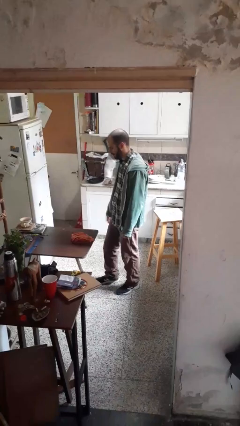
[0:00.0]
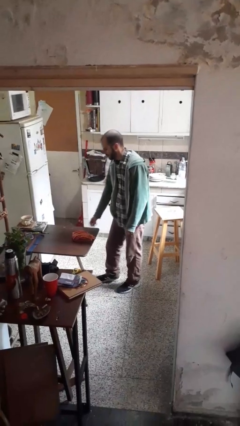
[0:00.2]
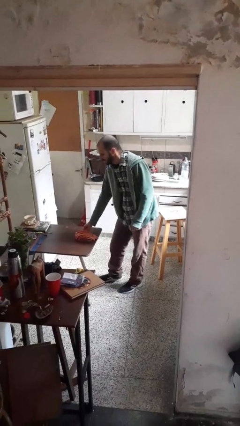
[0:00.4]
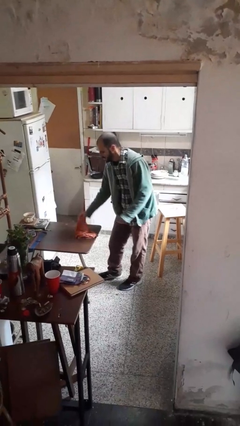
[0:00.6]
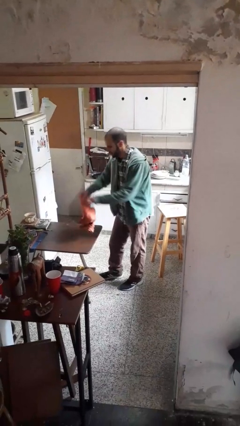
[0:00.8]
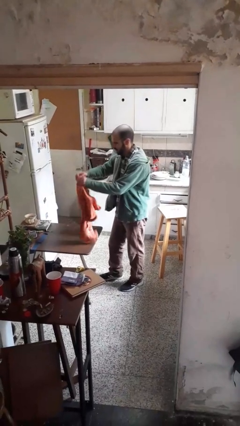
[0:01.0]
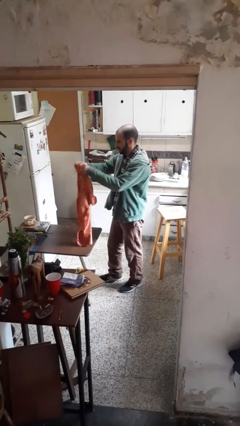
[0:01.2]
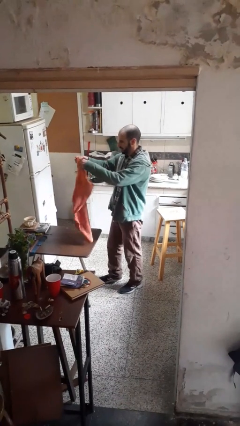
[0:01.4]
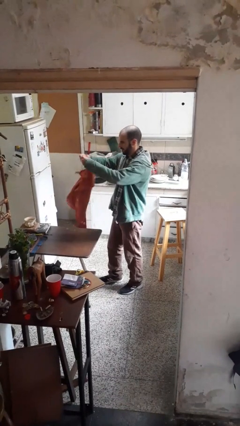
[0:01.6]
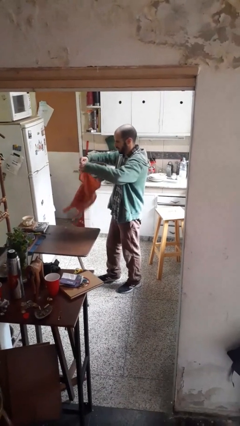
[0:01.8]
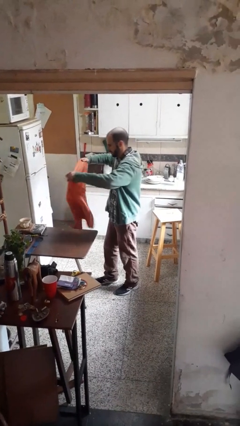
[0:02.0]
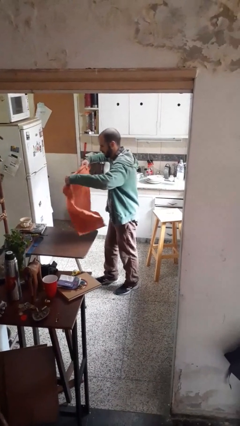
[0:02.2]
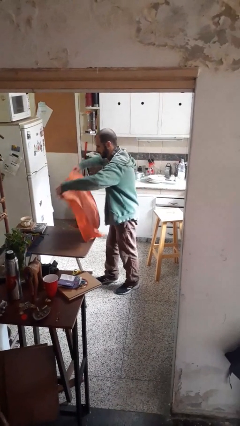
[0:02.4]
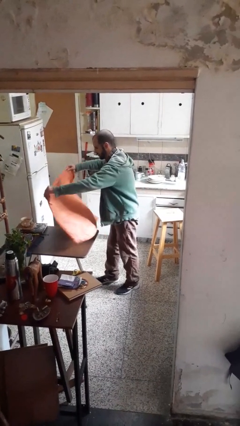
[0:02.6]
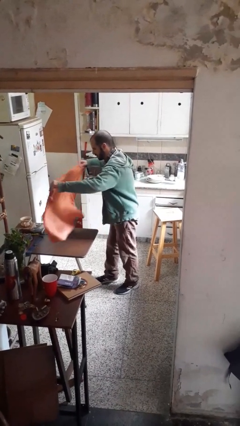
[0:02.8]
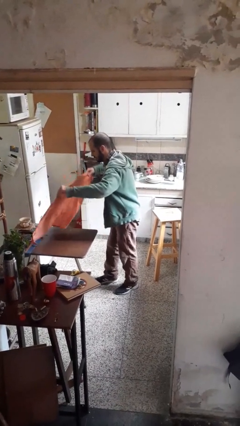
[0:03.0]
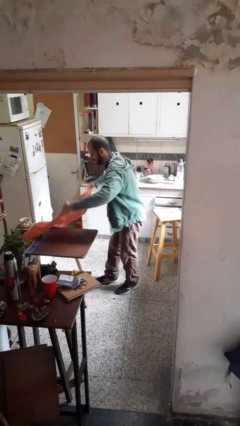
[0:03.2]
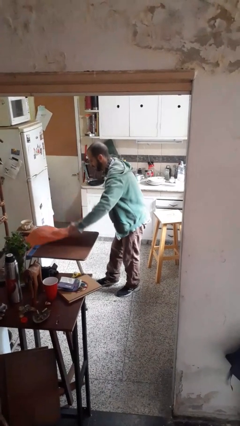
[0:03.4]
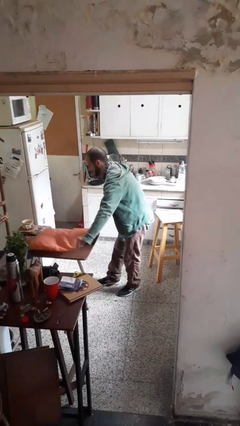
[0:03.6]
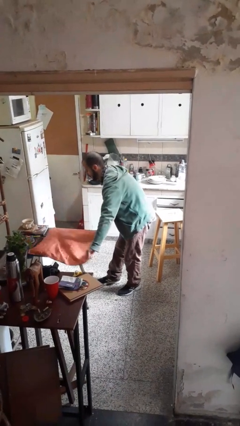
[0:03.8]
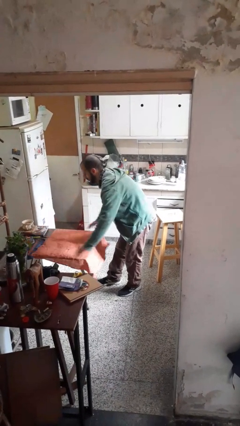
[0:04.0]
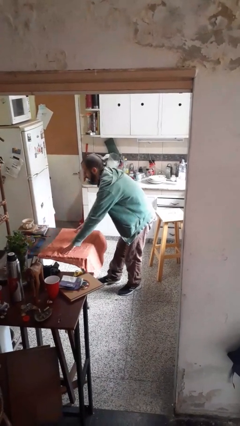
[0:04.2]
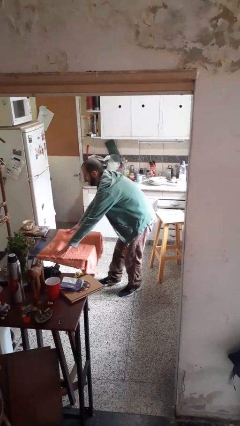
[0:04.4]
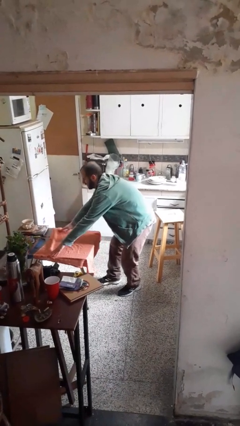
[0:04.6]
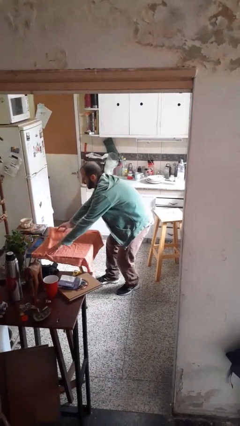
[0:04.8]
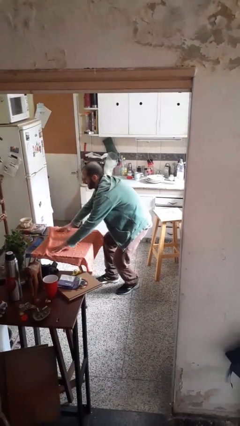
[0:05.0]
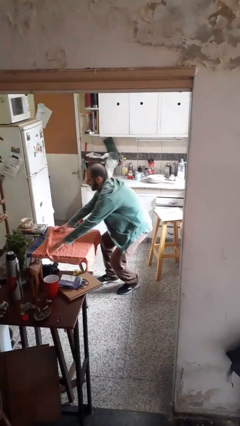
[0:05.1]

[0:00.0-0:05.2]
person spreads tablecloth

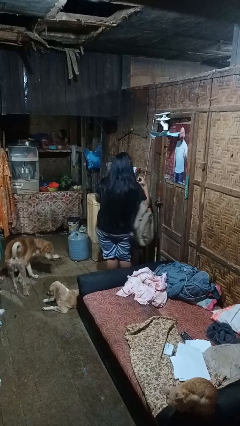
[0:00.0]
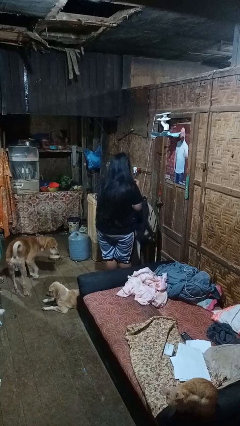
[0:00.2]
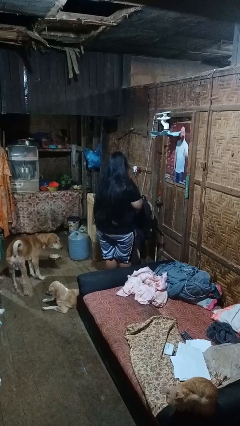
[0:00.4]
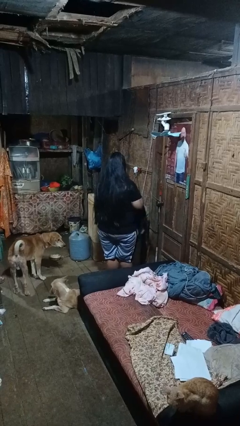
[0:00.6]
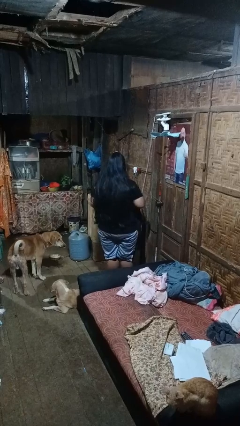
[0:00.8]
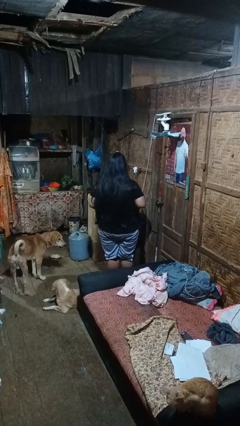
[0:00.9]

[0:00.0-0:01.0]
person takes off backpack

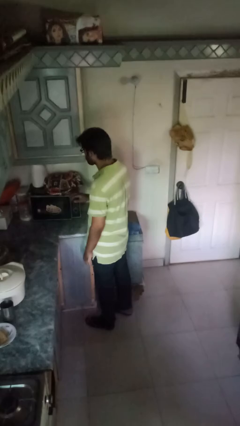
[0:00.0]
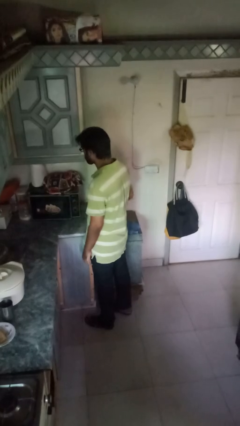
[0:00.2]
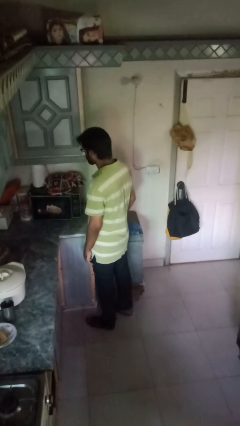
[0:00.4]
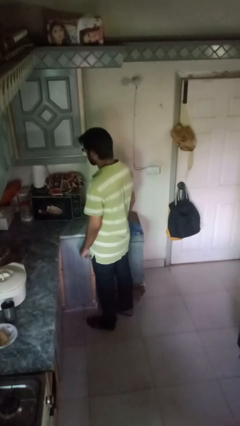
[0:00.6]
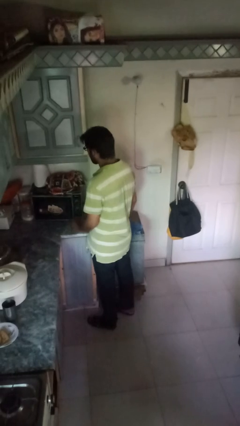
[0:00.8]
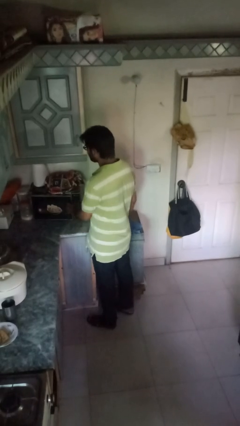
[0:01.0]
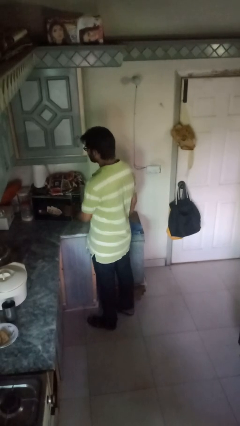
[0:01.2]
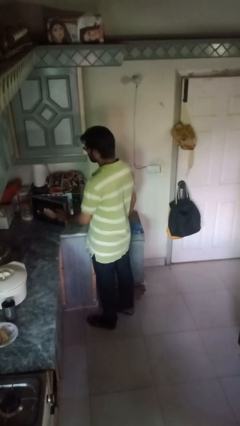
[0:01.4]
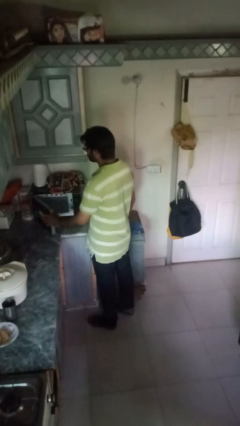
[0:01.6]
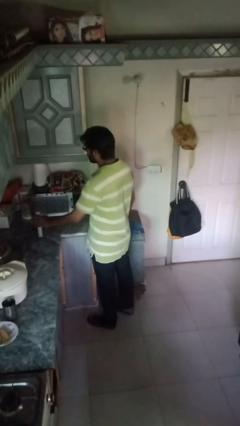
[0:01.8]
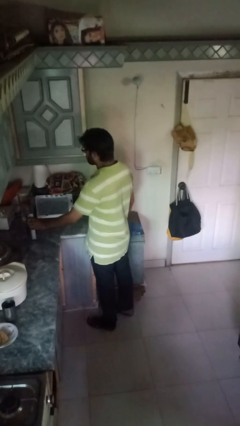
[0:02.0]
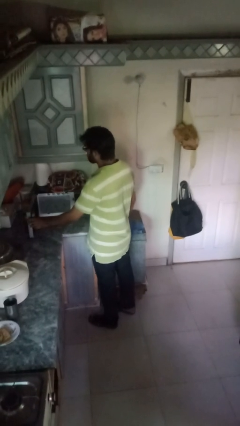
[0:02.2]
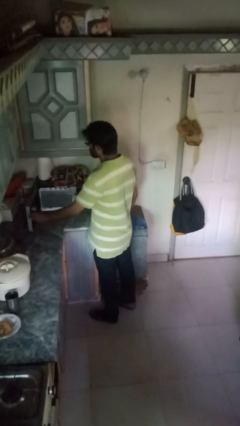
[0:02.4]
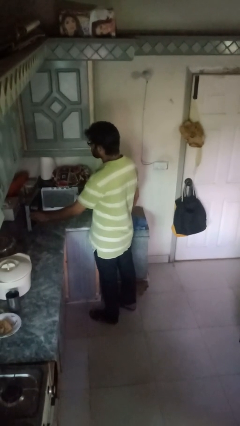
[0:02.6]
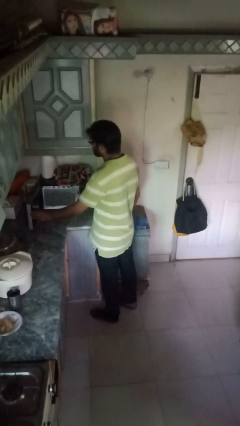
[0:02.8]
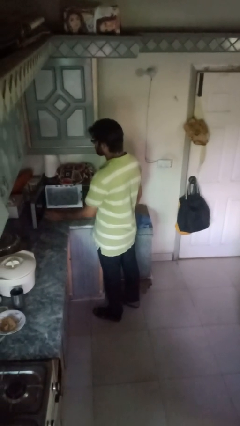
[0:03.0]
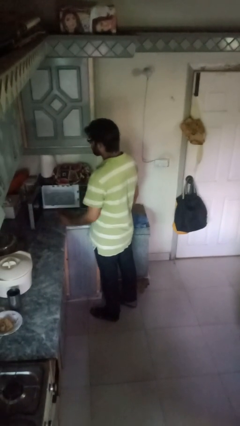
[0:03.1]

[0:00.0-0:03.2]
person opens oven door

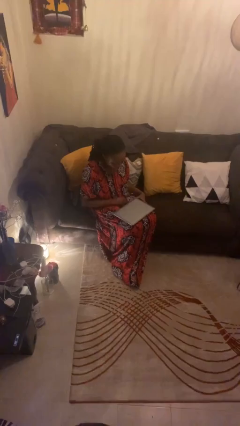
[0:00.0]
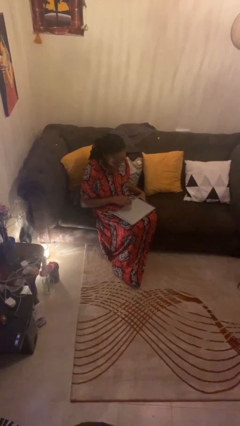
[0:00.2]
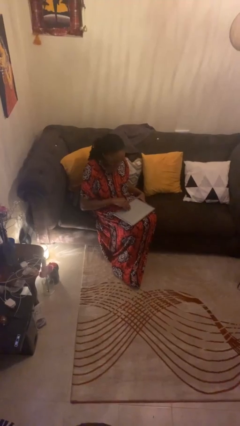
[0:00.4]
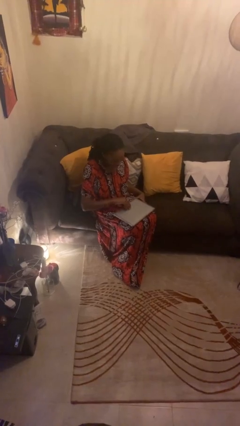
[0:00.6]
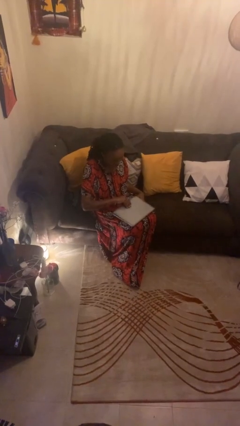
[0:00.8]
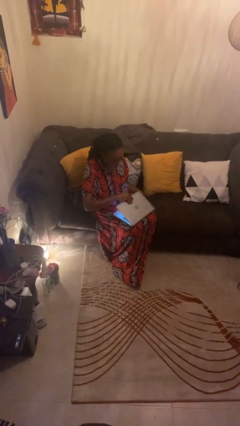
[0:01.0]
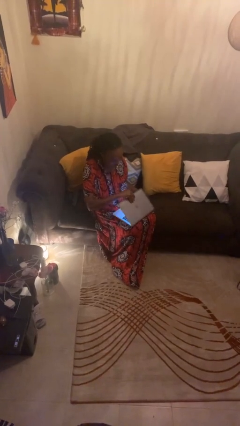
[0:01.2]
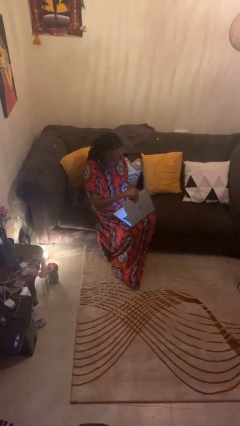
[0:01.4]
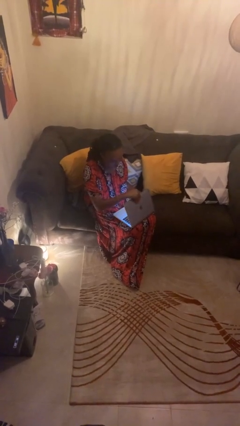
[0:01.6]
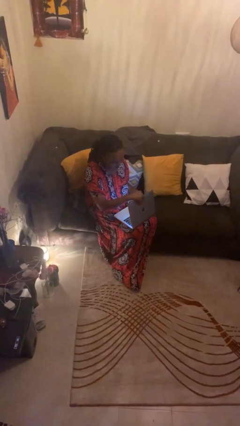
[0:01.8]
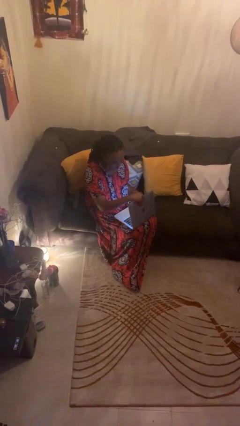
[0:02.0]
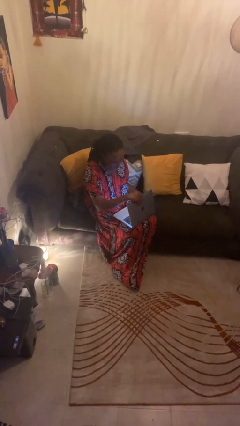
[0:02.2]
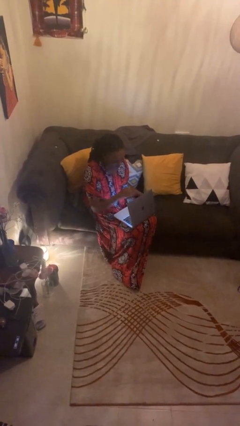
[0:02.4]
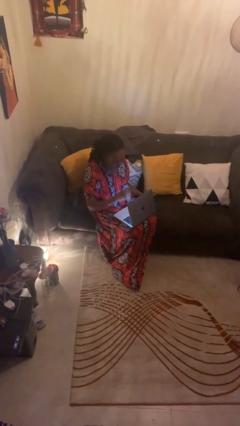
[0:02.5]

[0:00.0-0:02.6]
person opens laptop

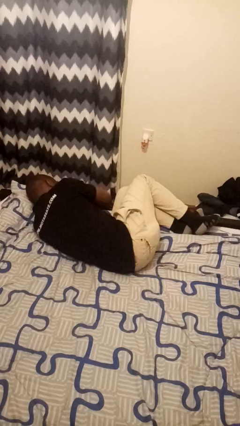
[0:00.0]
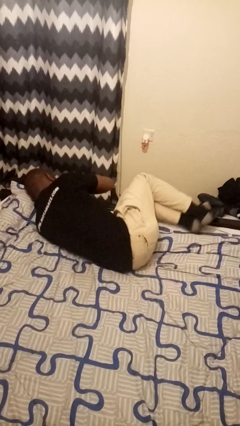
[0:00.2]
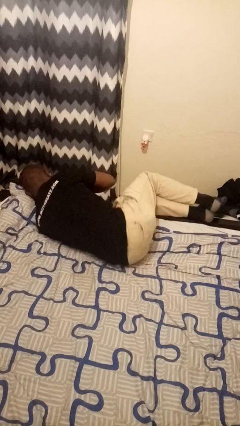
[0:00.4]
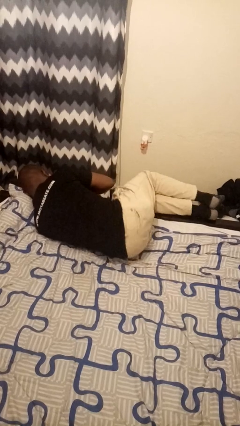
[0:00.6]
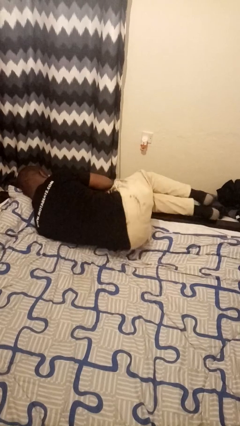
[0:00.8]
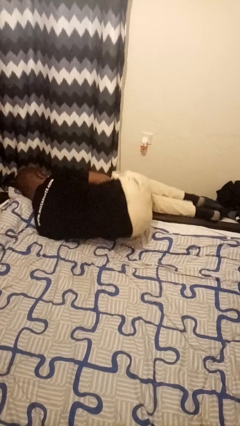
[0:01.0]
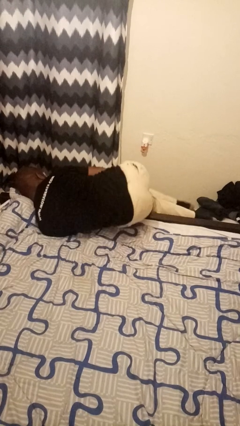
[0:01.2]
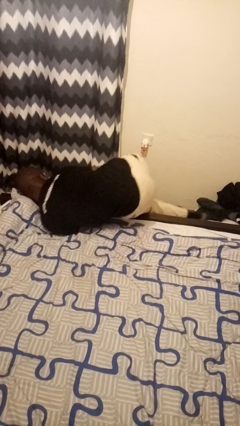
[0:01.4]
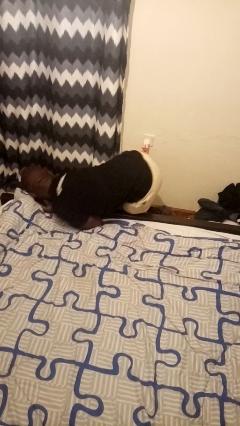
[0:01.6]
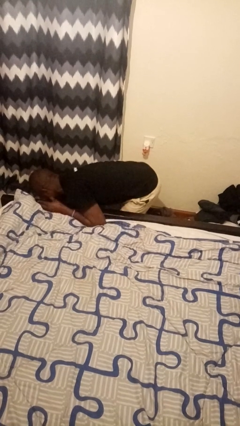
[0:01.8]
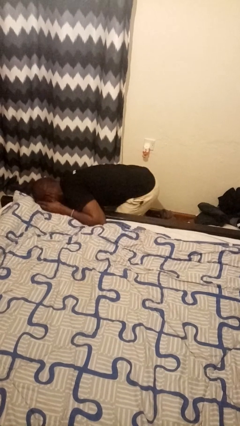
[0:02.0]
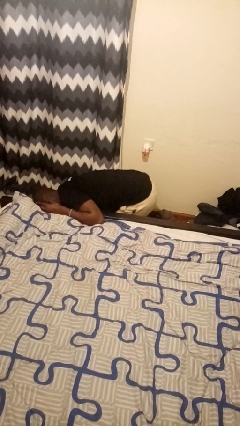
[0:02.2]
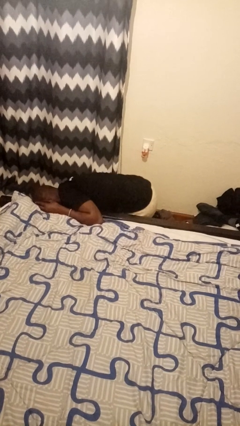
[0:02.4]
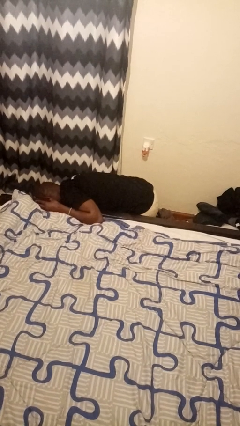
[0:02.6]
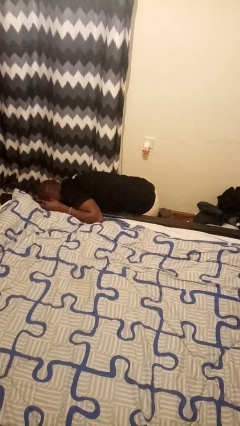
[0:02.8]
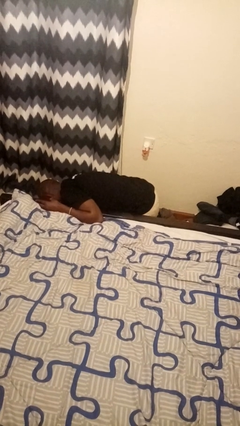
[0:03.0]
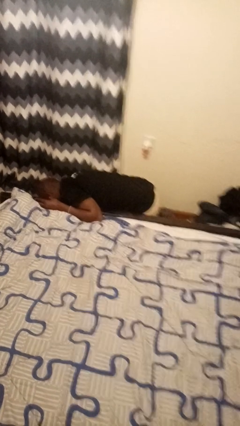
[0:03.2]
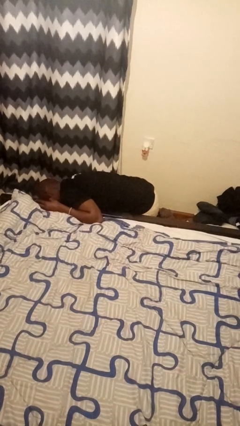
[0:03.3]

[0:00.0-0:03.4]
person falls from bed

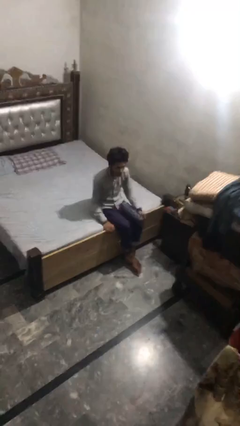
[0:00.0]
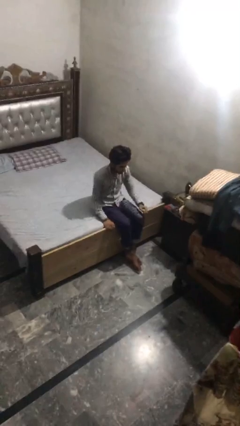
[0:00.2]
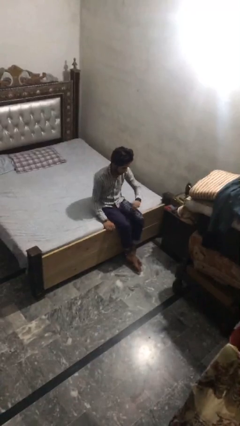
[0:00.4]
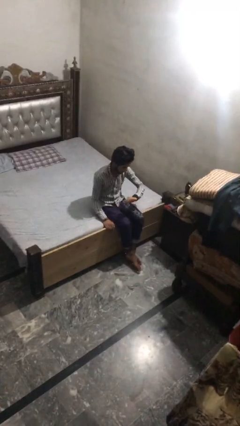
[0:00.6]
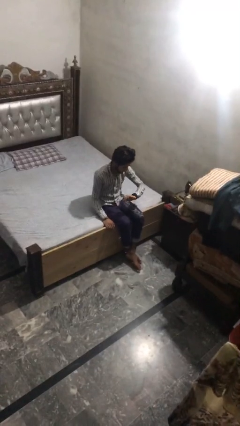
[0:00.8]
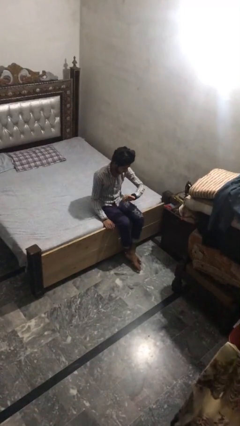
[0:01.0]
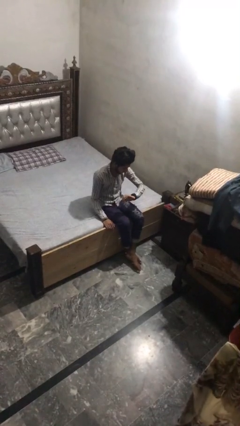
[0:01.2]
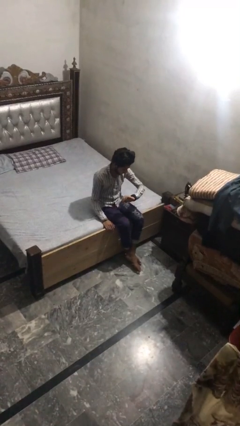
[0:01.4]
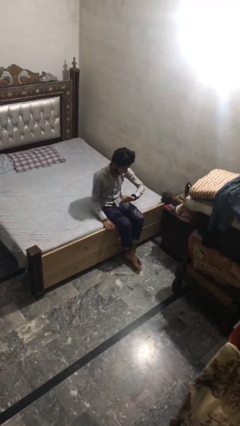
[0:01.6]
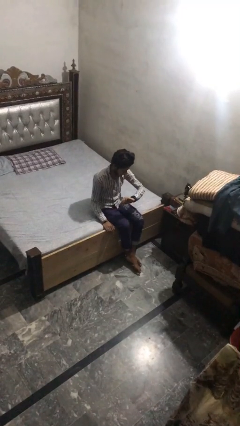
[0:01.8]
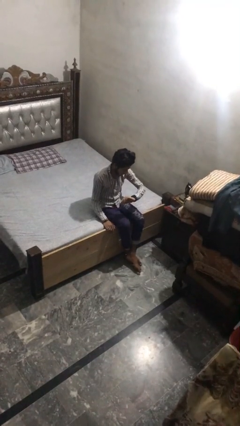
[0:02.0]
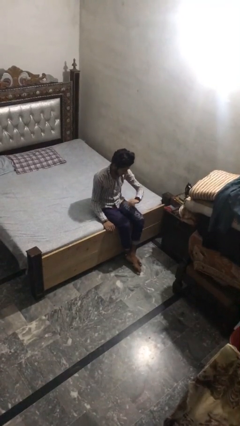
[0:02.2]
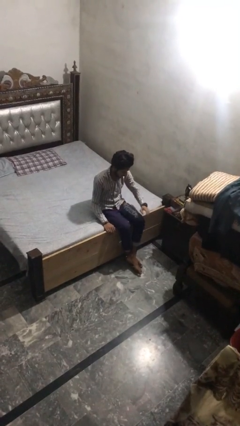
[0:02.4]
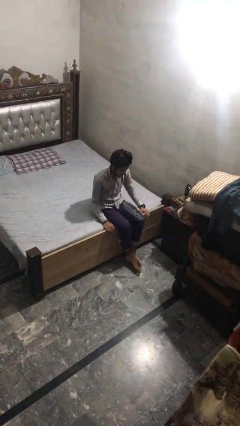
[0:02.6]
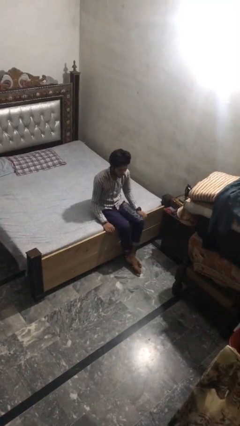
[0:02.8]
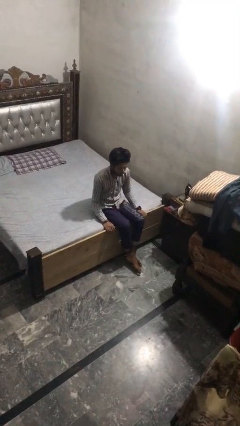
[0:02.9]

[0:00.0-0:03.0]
person looks at wristwatch
